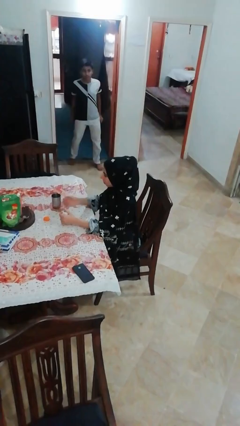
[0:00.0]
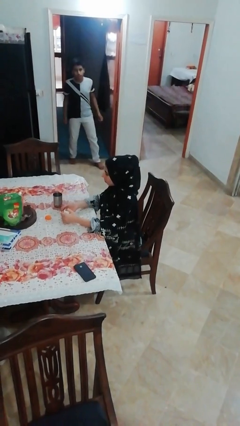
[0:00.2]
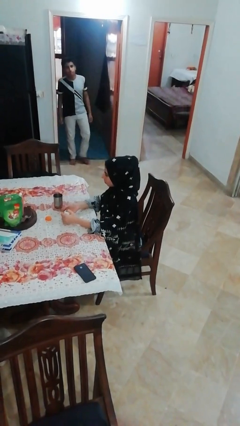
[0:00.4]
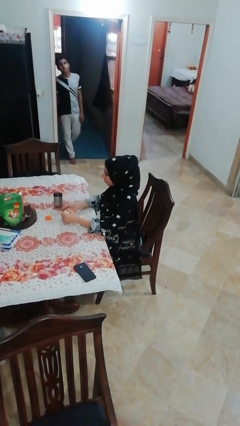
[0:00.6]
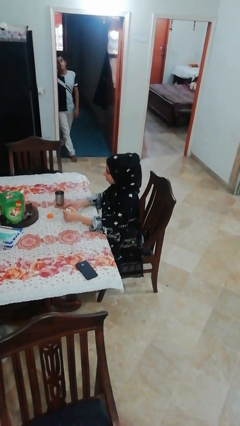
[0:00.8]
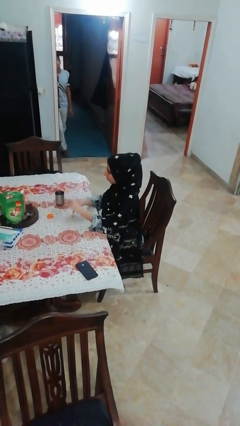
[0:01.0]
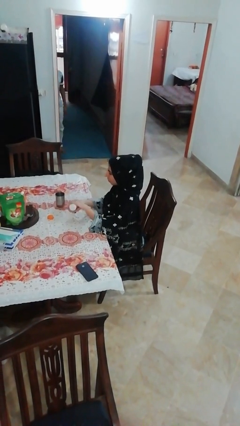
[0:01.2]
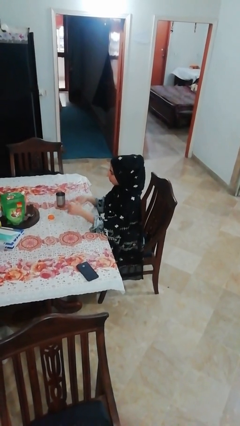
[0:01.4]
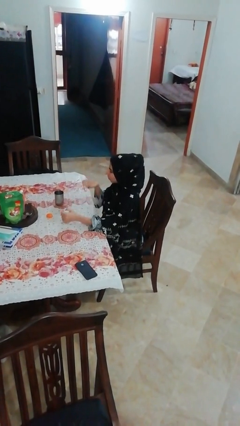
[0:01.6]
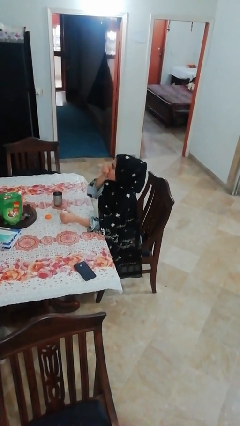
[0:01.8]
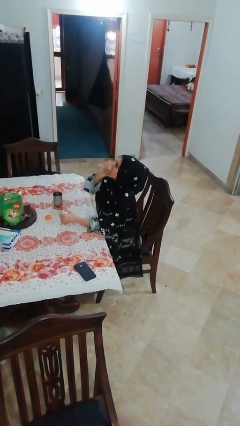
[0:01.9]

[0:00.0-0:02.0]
person takes medicine pills

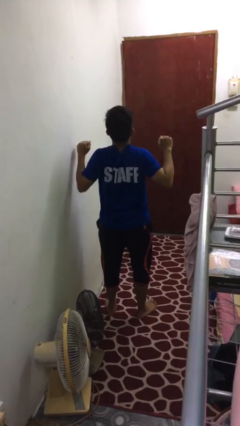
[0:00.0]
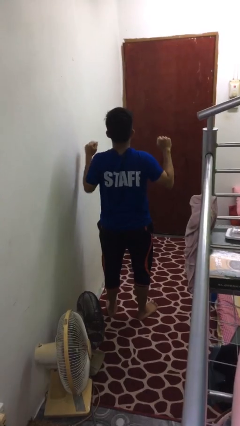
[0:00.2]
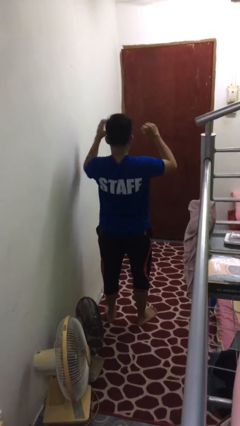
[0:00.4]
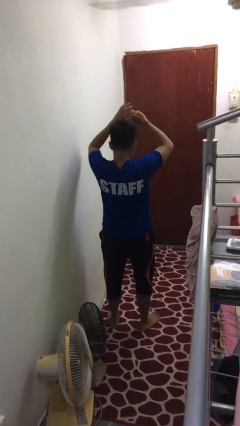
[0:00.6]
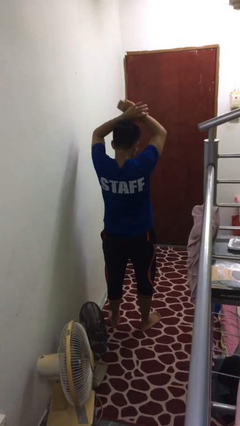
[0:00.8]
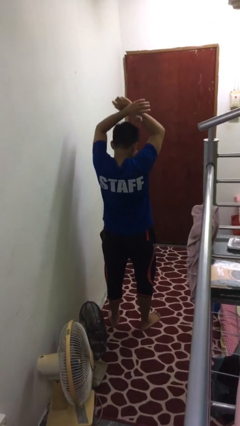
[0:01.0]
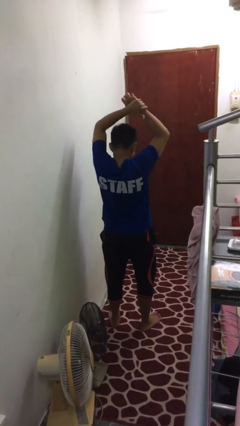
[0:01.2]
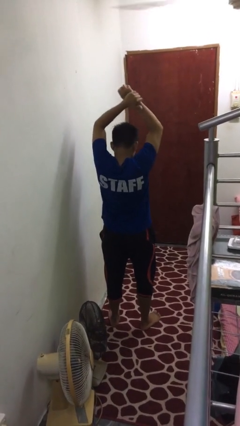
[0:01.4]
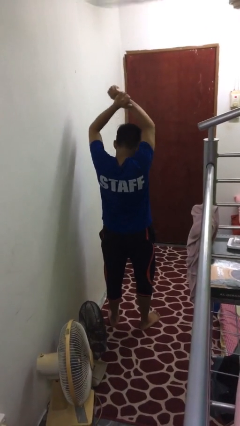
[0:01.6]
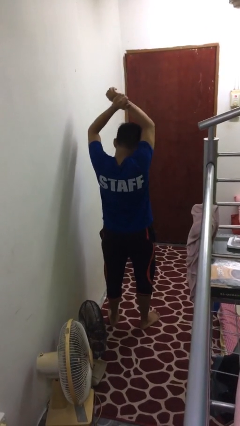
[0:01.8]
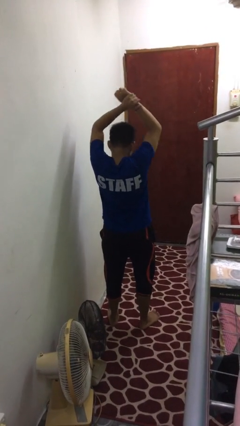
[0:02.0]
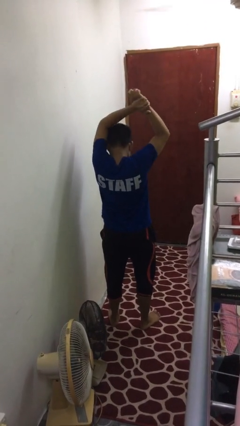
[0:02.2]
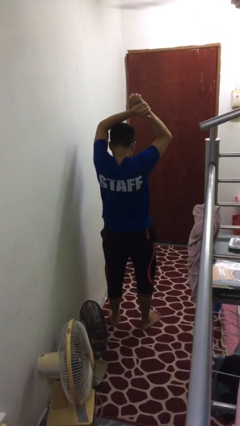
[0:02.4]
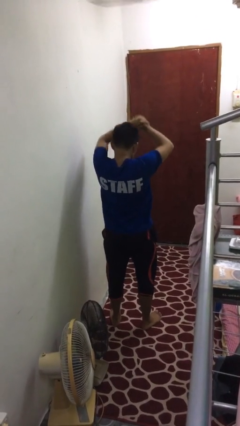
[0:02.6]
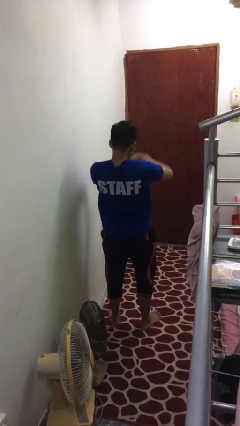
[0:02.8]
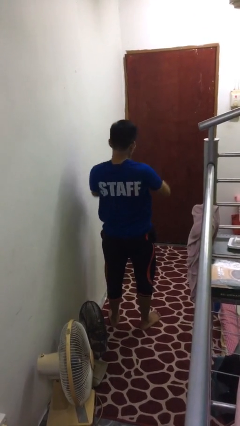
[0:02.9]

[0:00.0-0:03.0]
person stretches arms over head

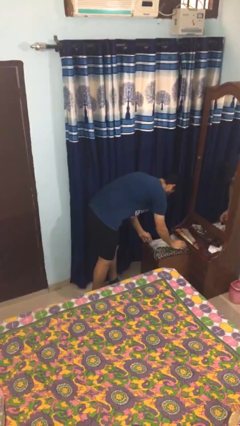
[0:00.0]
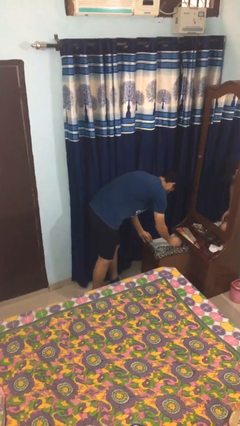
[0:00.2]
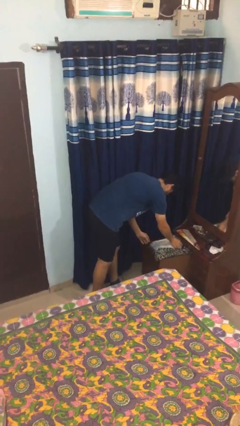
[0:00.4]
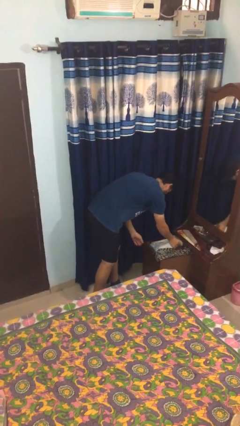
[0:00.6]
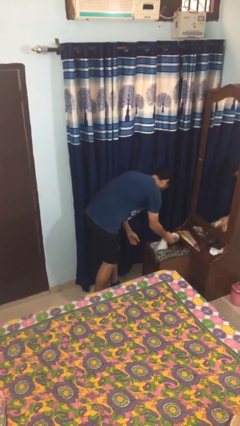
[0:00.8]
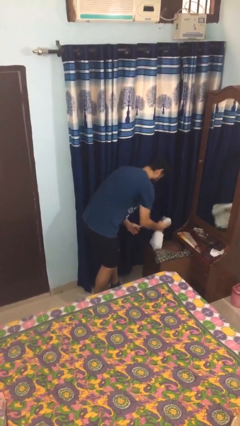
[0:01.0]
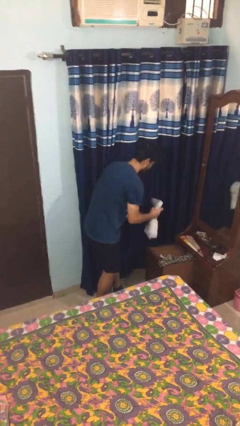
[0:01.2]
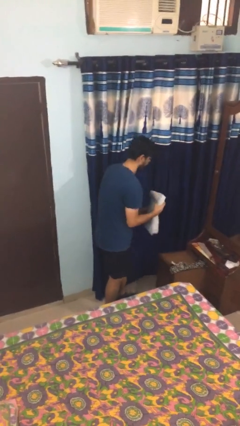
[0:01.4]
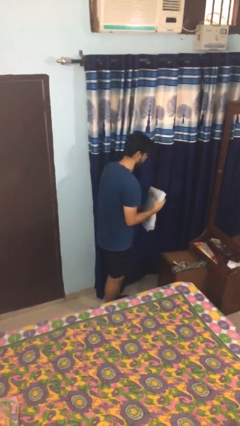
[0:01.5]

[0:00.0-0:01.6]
person takes clothes from dresser

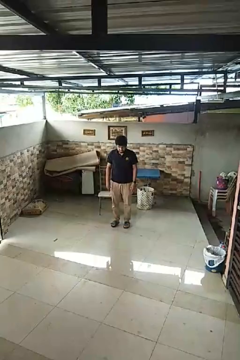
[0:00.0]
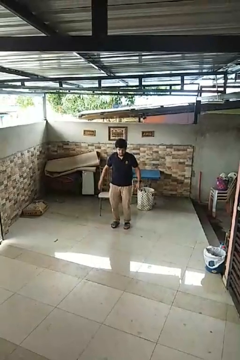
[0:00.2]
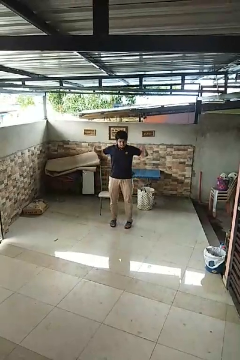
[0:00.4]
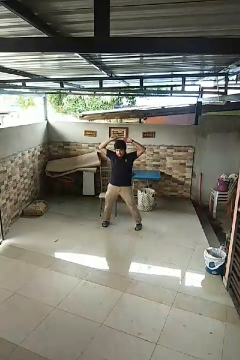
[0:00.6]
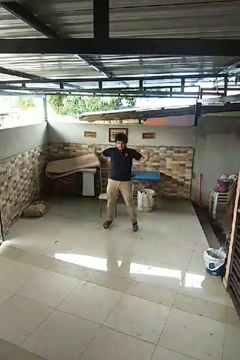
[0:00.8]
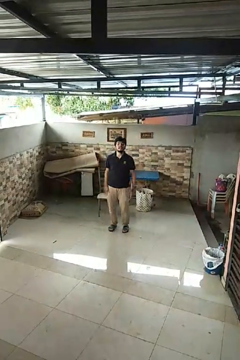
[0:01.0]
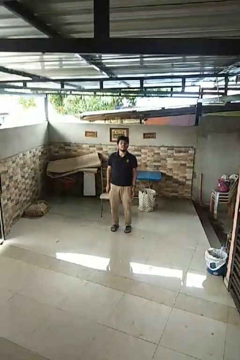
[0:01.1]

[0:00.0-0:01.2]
person exercises with jumping jacks

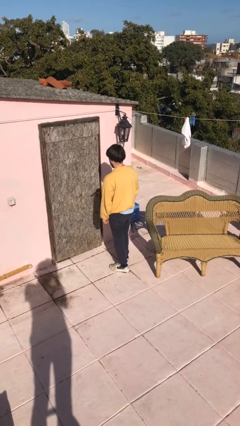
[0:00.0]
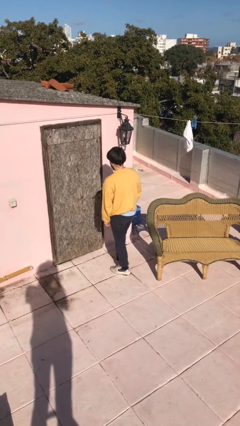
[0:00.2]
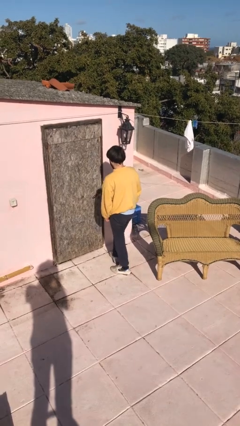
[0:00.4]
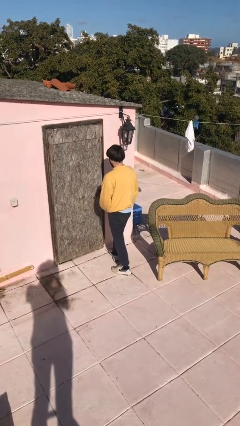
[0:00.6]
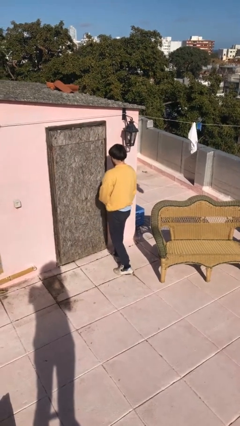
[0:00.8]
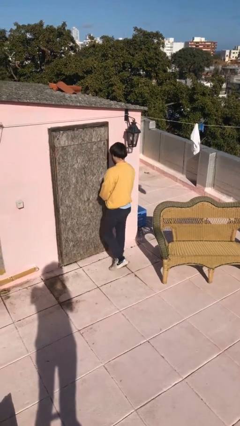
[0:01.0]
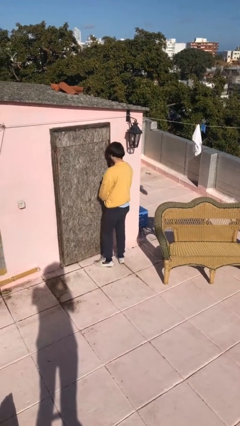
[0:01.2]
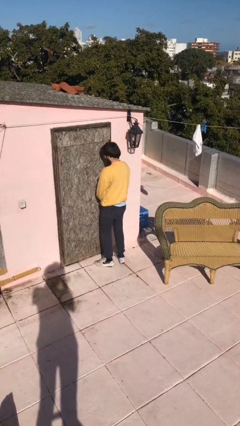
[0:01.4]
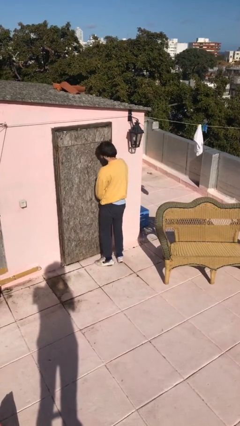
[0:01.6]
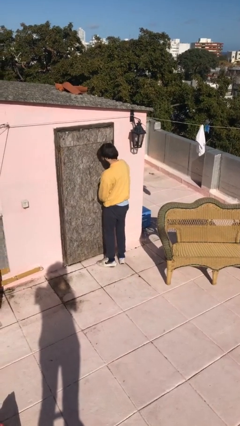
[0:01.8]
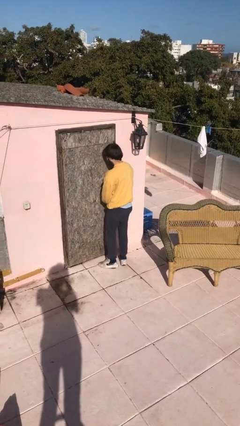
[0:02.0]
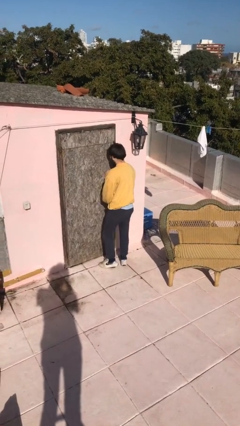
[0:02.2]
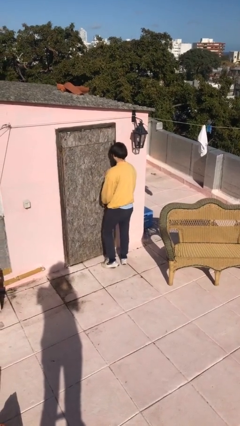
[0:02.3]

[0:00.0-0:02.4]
person unlocks door with keys

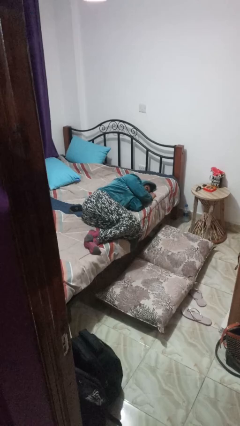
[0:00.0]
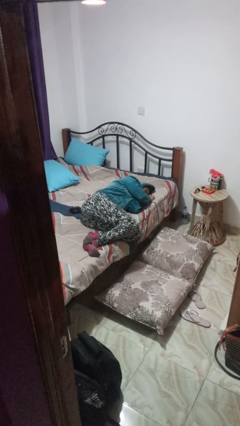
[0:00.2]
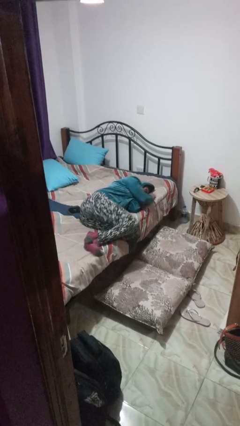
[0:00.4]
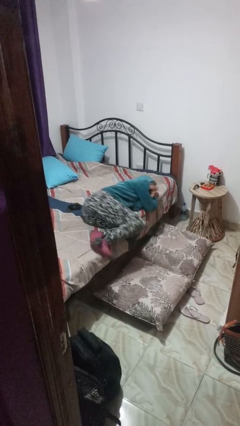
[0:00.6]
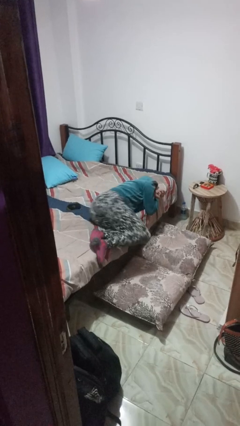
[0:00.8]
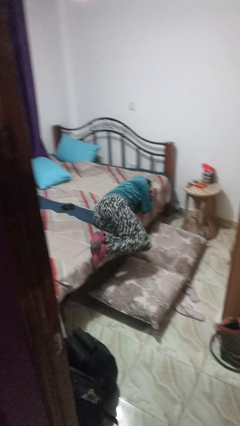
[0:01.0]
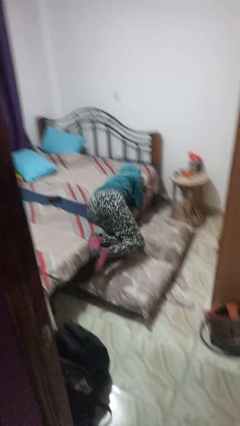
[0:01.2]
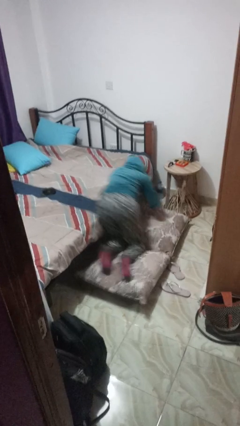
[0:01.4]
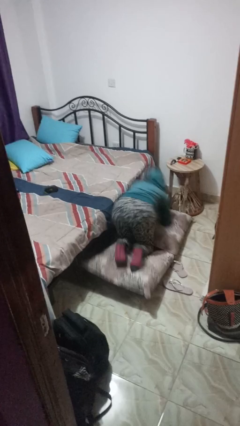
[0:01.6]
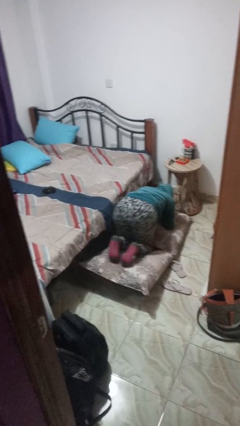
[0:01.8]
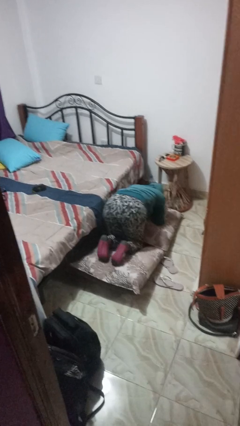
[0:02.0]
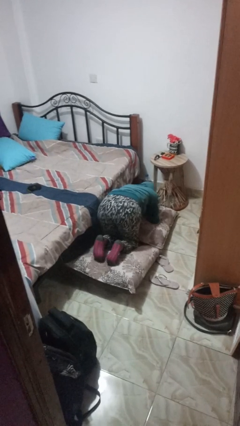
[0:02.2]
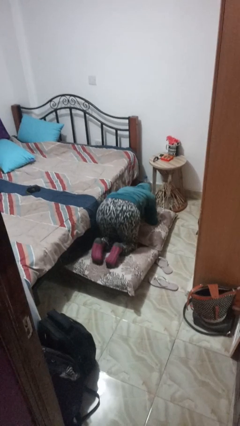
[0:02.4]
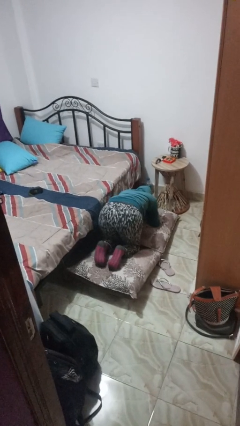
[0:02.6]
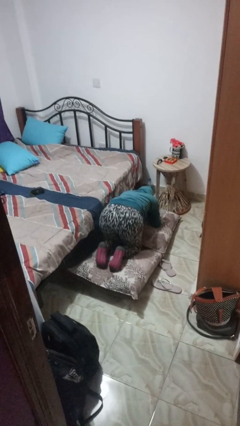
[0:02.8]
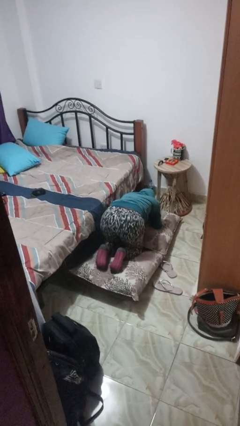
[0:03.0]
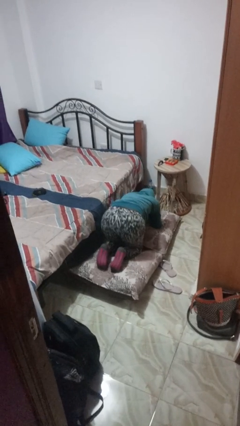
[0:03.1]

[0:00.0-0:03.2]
person falls from bed

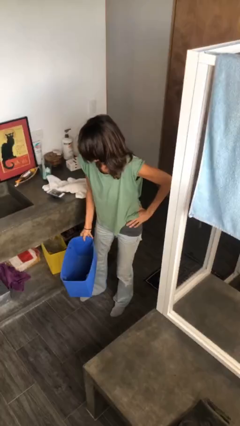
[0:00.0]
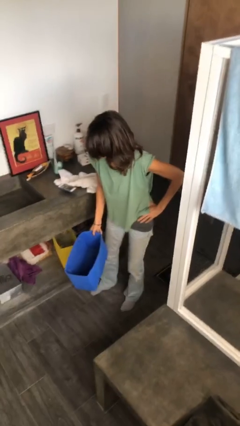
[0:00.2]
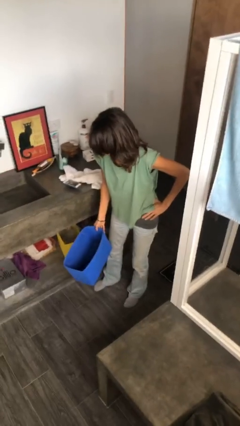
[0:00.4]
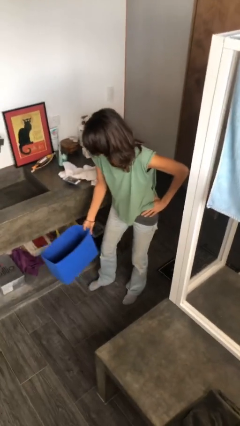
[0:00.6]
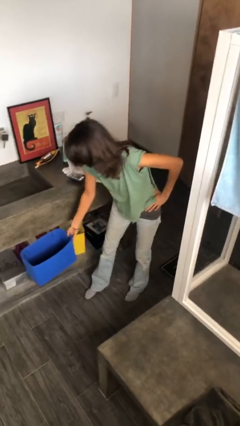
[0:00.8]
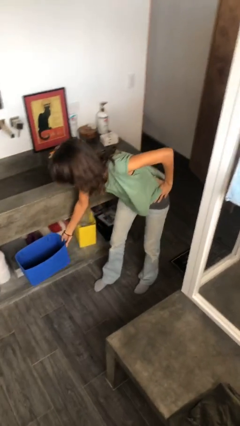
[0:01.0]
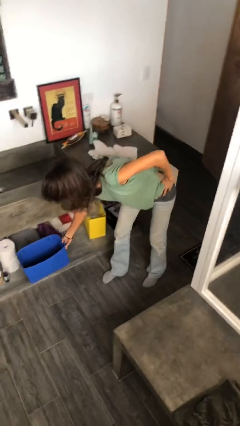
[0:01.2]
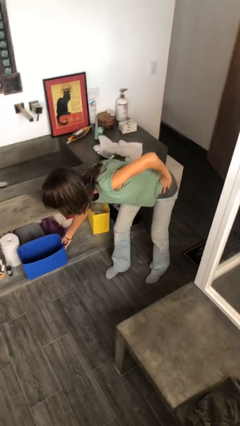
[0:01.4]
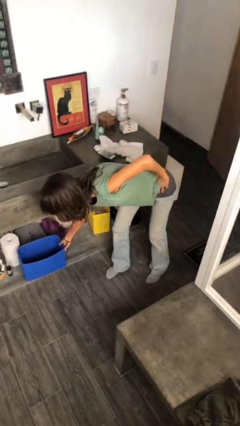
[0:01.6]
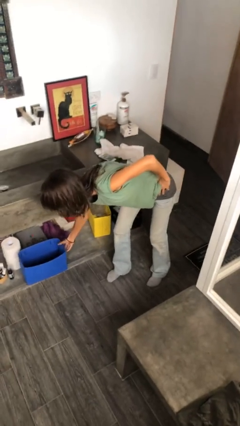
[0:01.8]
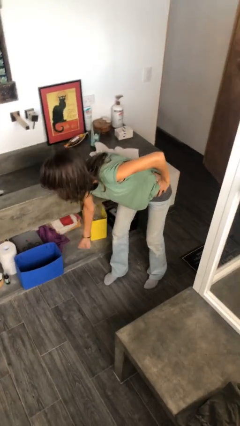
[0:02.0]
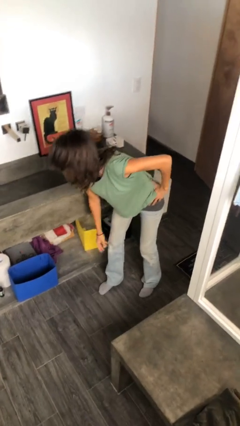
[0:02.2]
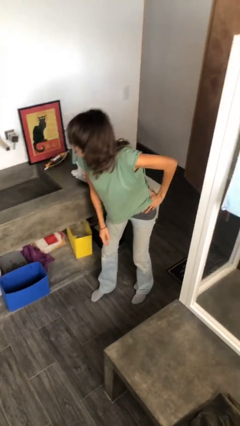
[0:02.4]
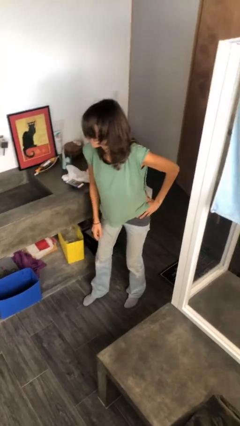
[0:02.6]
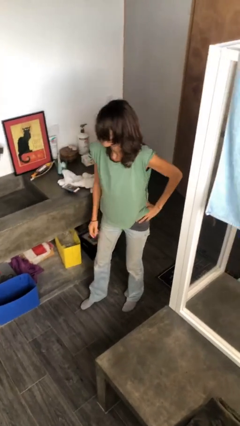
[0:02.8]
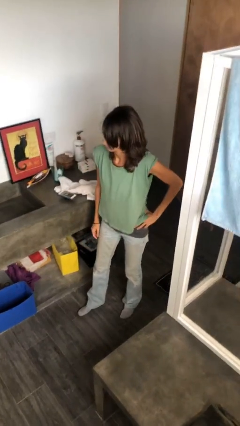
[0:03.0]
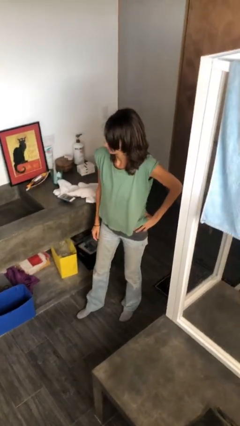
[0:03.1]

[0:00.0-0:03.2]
person puts down object into cabinet

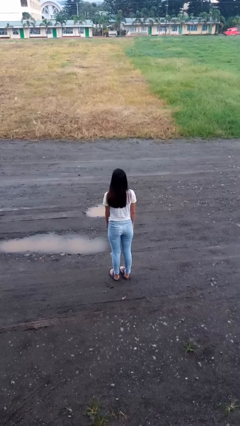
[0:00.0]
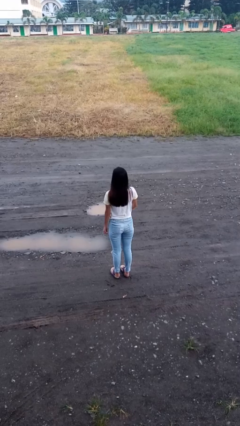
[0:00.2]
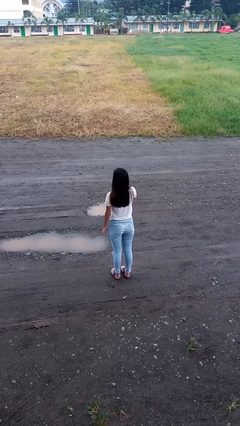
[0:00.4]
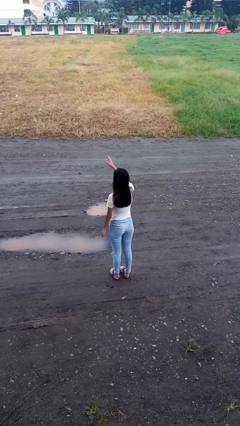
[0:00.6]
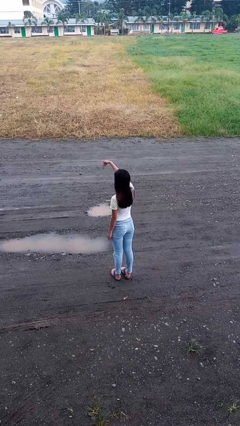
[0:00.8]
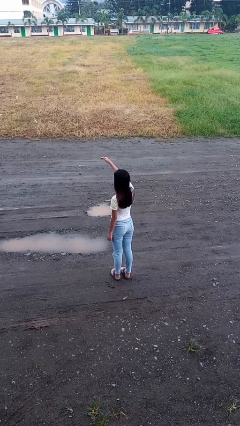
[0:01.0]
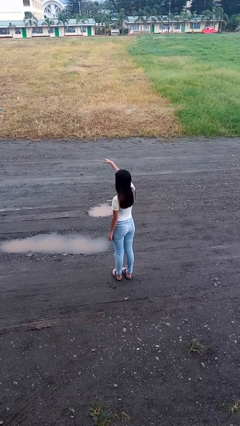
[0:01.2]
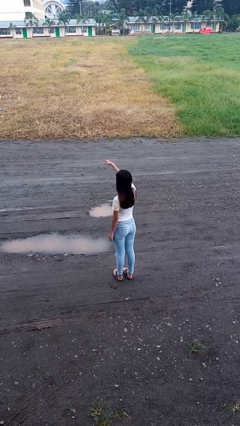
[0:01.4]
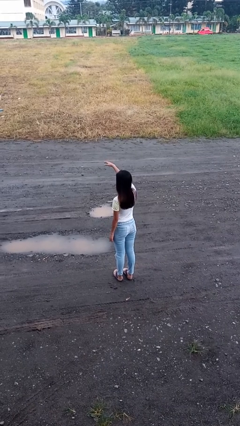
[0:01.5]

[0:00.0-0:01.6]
person gestures come here
